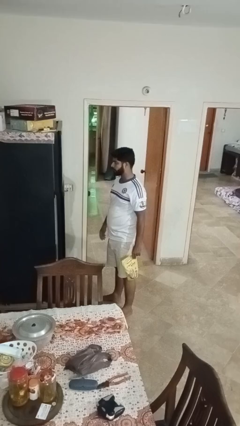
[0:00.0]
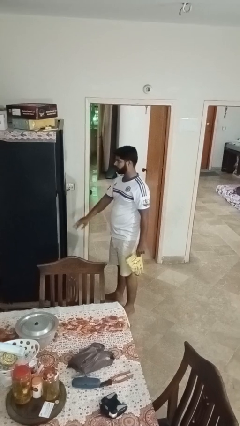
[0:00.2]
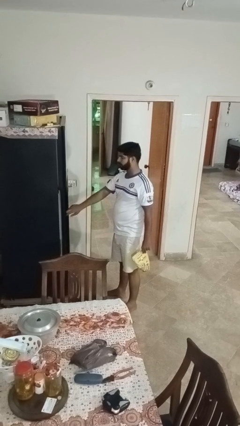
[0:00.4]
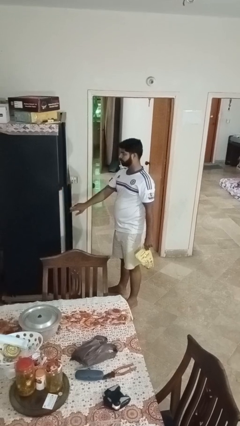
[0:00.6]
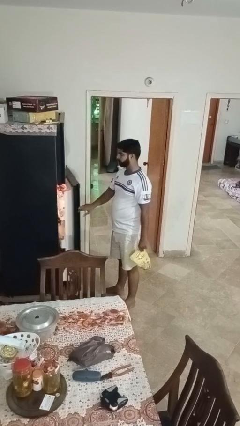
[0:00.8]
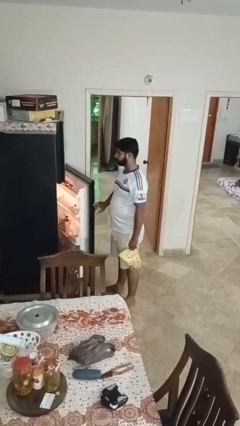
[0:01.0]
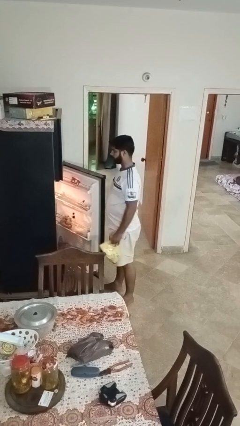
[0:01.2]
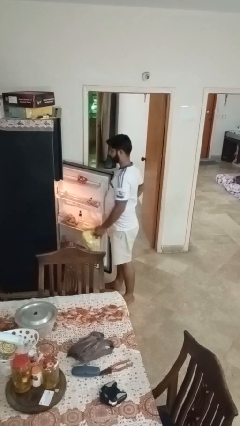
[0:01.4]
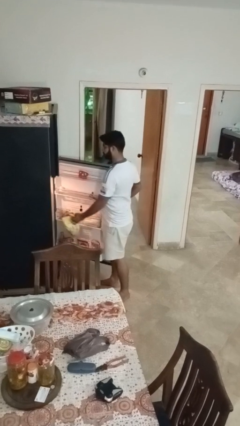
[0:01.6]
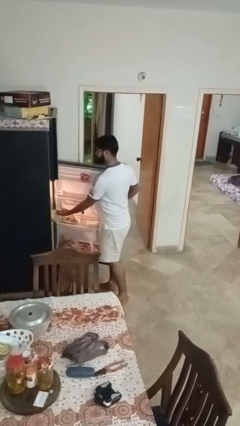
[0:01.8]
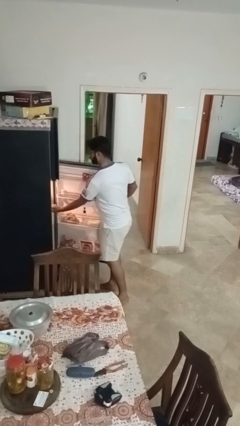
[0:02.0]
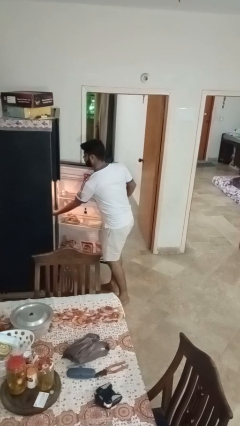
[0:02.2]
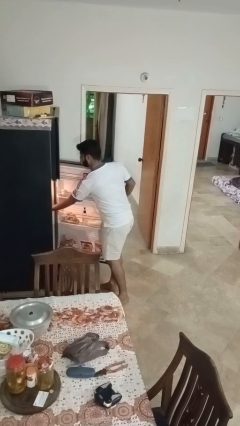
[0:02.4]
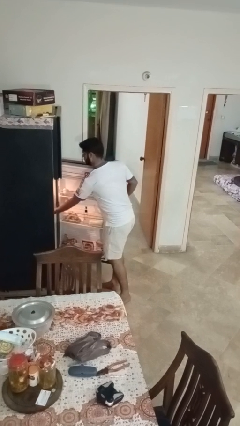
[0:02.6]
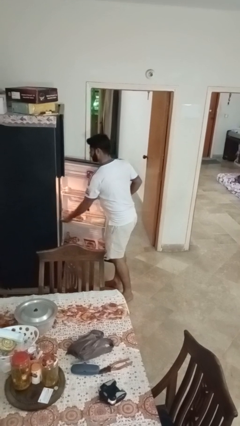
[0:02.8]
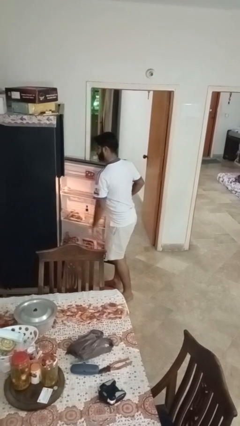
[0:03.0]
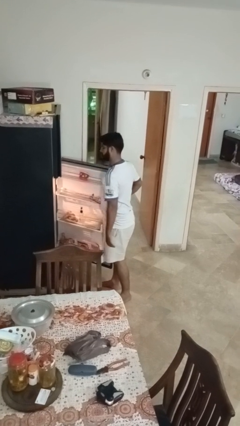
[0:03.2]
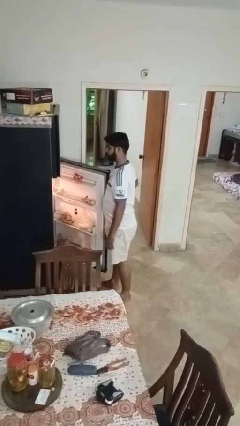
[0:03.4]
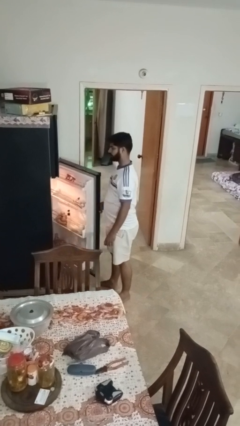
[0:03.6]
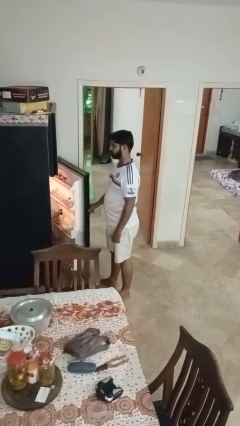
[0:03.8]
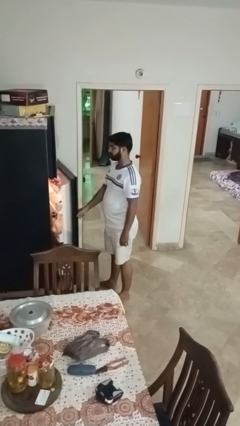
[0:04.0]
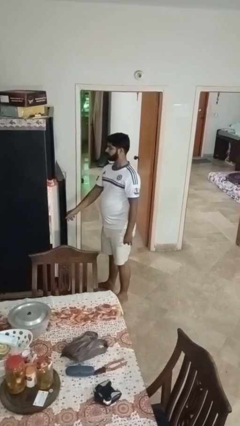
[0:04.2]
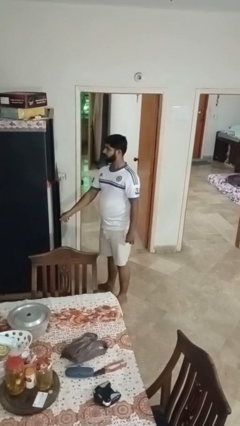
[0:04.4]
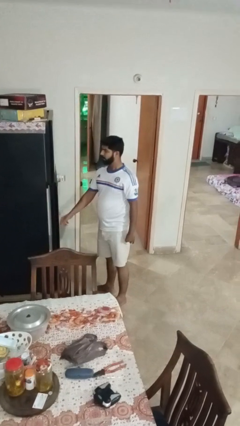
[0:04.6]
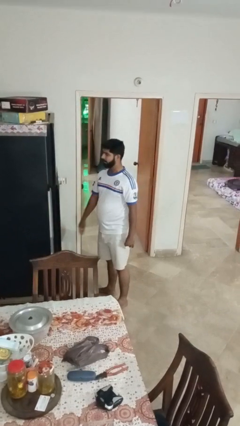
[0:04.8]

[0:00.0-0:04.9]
person puts object into refrigerator

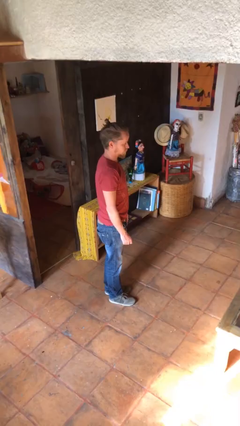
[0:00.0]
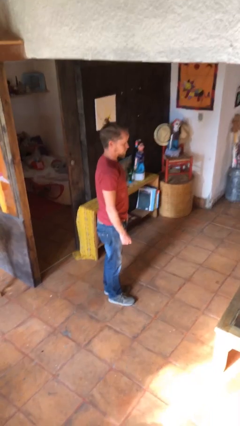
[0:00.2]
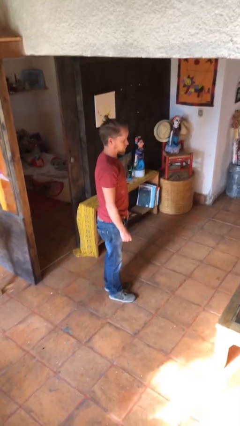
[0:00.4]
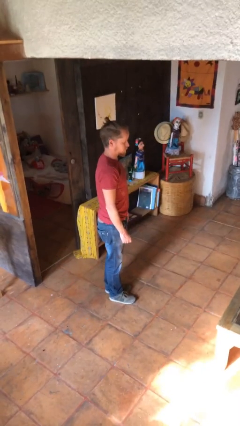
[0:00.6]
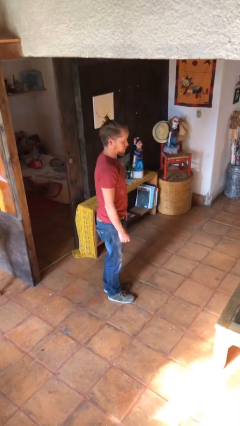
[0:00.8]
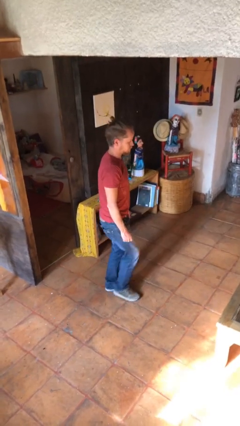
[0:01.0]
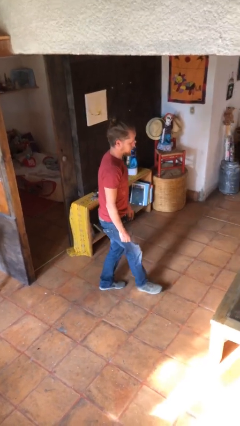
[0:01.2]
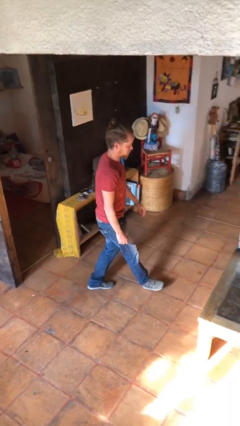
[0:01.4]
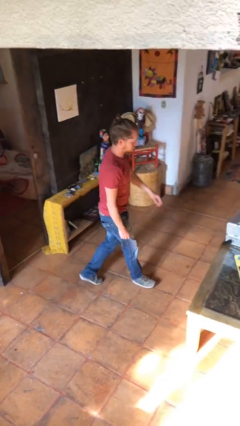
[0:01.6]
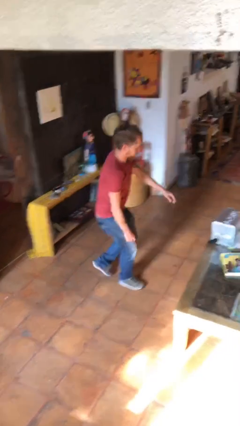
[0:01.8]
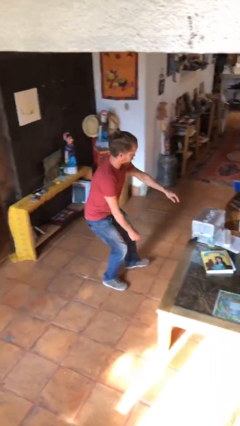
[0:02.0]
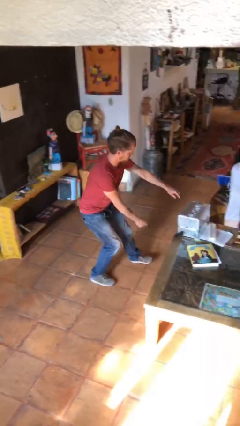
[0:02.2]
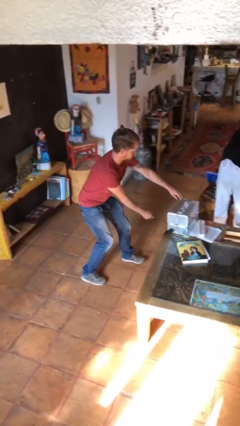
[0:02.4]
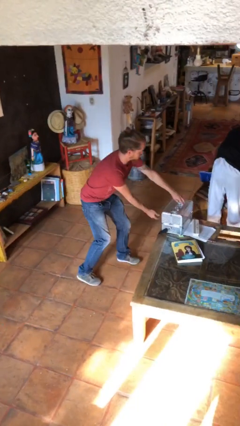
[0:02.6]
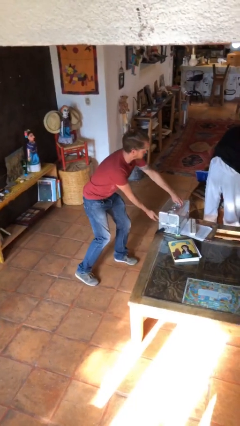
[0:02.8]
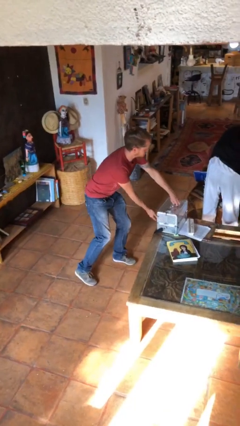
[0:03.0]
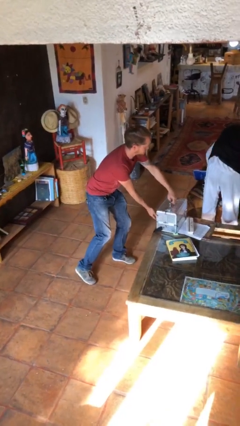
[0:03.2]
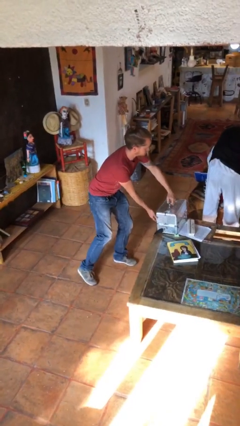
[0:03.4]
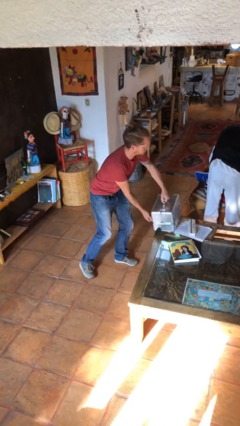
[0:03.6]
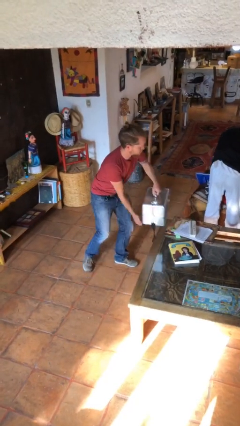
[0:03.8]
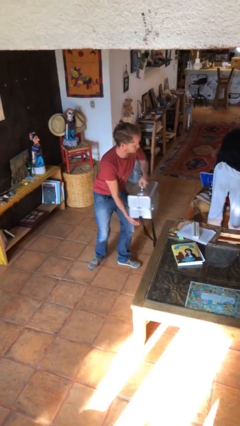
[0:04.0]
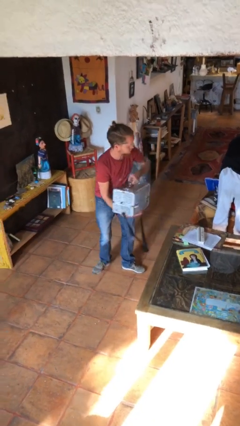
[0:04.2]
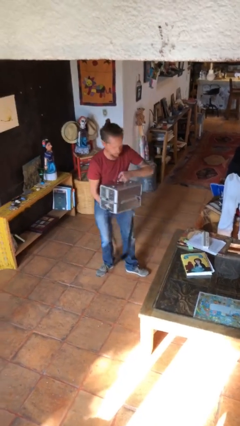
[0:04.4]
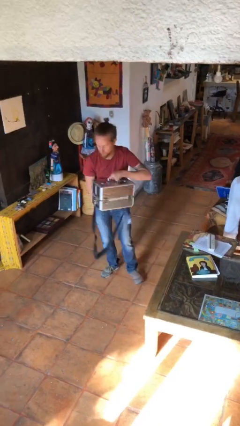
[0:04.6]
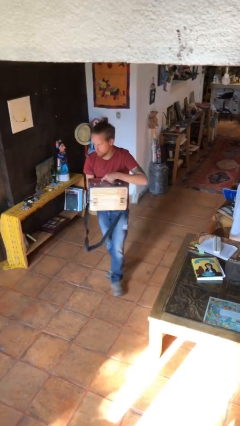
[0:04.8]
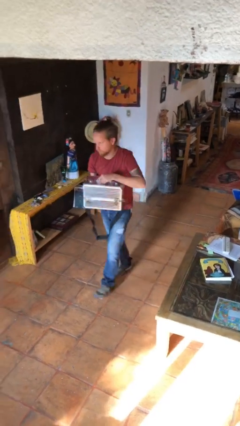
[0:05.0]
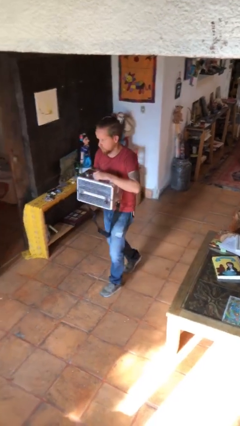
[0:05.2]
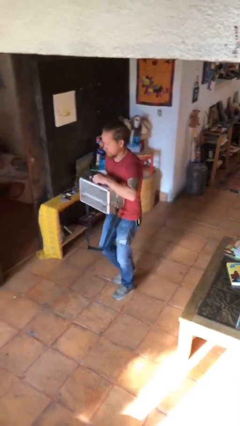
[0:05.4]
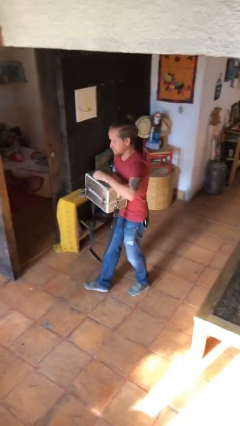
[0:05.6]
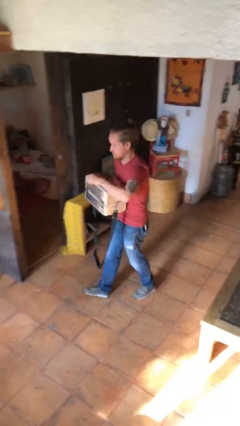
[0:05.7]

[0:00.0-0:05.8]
person steals object from person

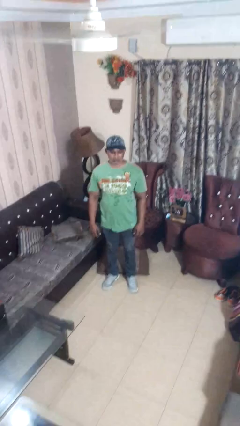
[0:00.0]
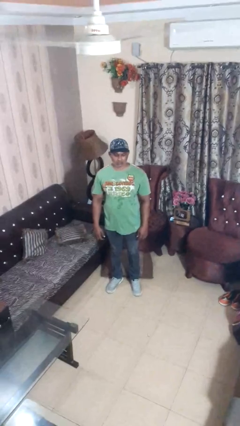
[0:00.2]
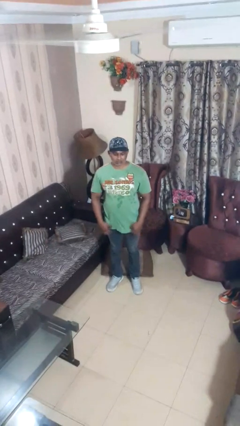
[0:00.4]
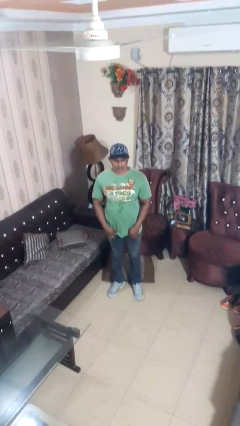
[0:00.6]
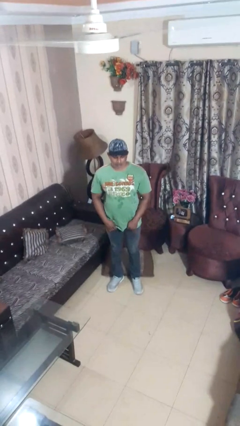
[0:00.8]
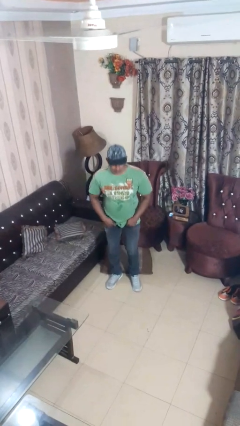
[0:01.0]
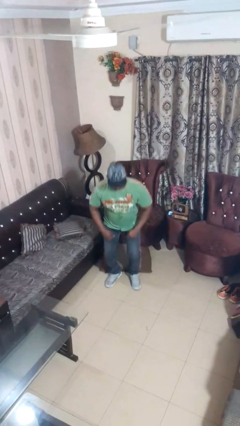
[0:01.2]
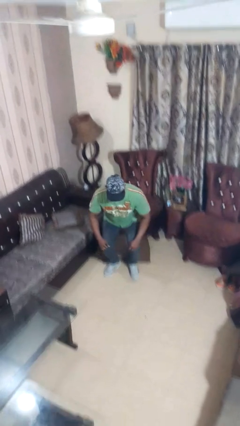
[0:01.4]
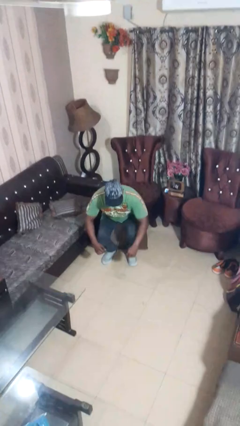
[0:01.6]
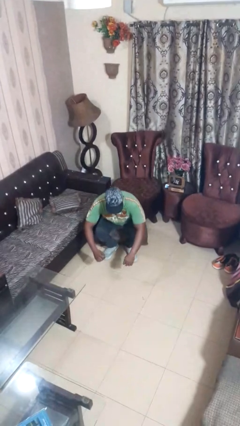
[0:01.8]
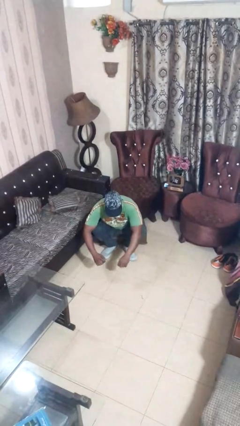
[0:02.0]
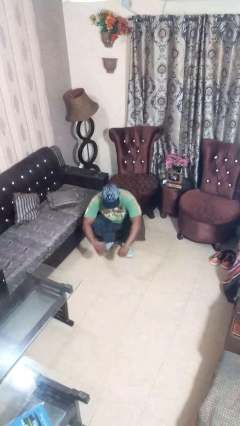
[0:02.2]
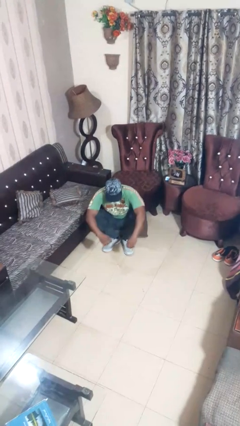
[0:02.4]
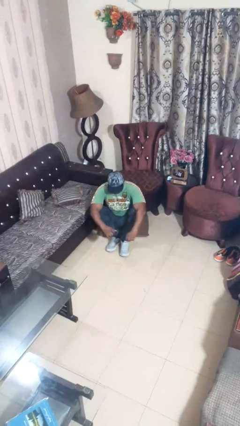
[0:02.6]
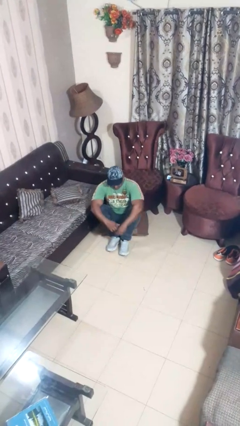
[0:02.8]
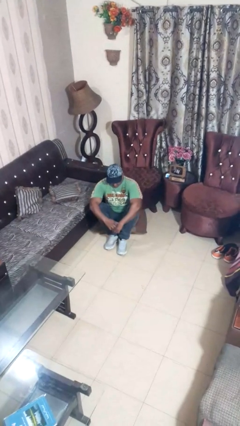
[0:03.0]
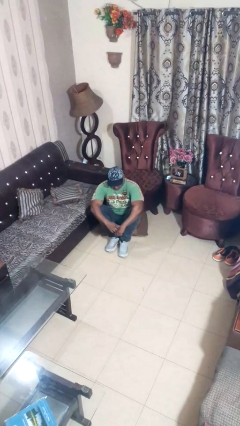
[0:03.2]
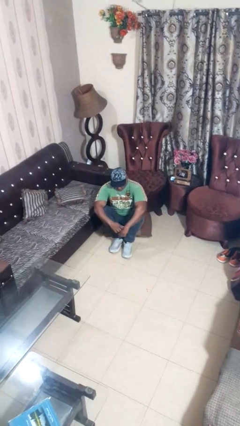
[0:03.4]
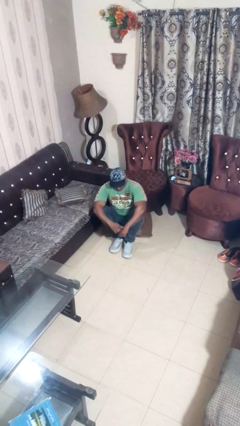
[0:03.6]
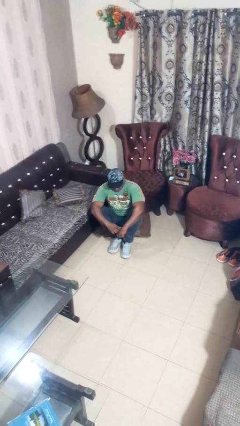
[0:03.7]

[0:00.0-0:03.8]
person sits crisscross

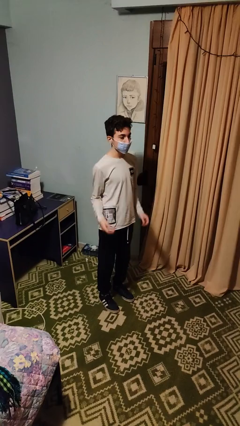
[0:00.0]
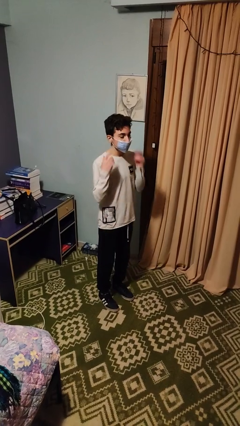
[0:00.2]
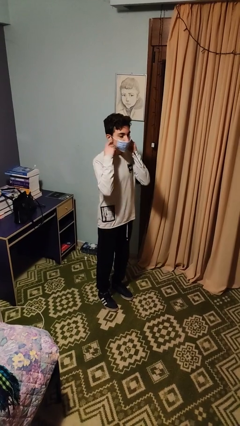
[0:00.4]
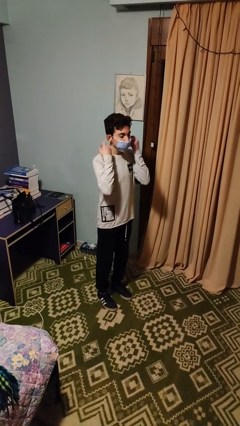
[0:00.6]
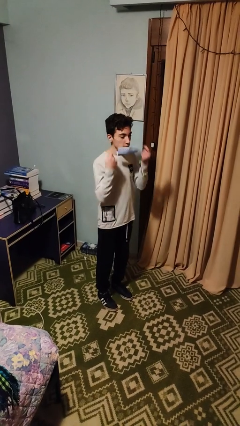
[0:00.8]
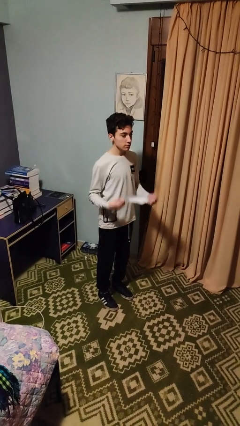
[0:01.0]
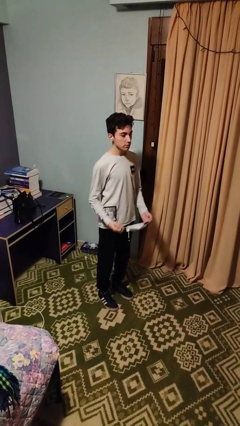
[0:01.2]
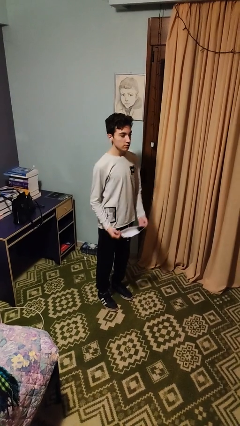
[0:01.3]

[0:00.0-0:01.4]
person takes off facemask

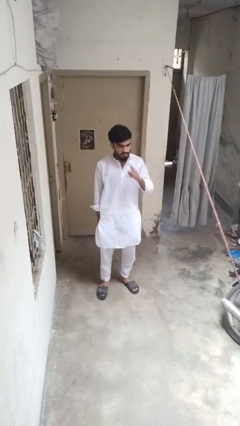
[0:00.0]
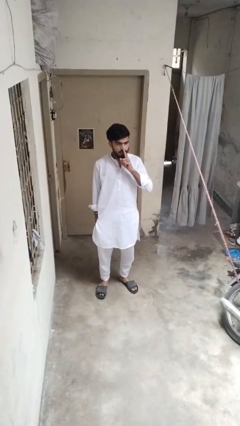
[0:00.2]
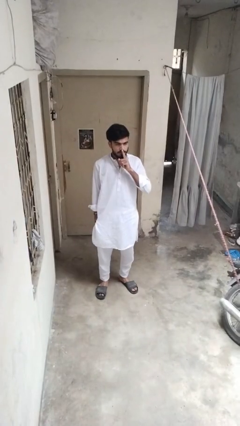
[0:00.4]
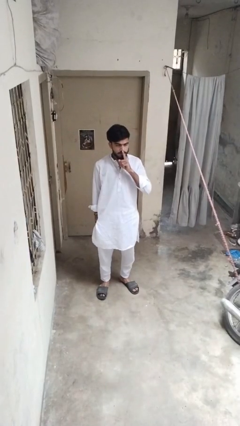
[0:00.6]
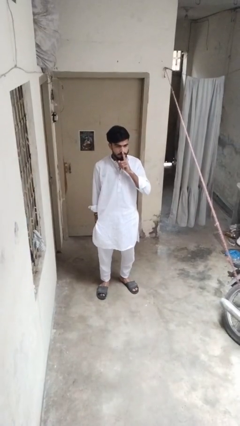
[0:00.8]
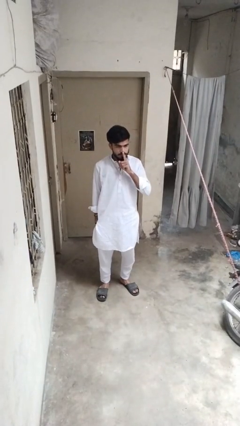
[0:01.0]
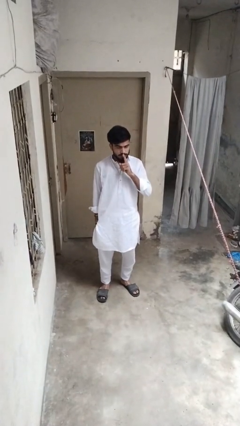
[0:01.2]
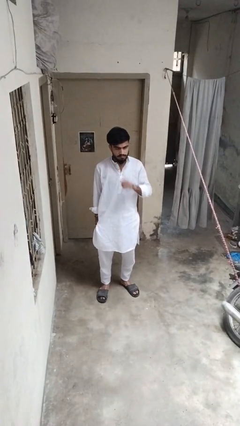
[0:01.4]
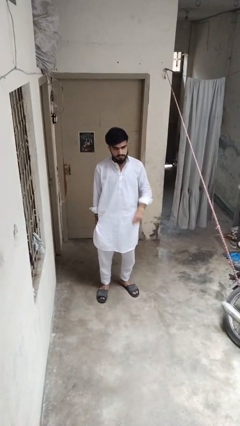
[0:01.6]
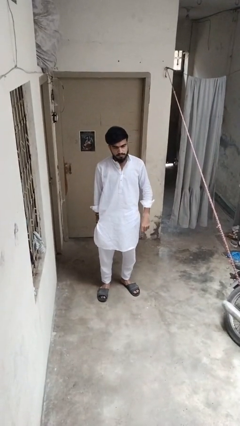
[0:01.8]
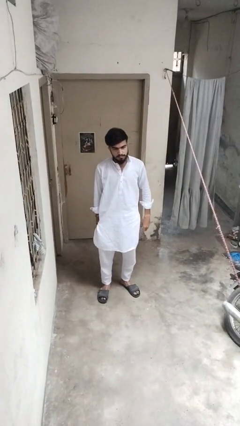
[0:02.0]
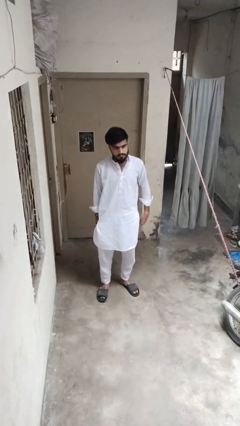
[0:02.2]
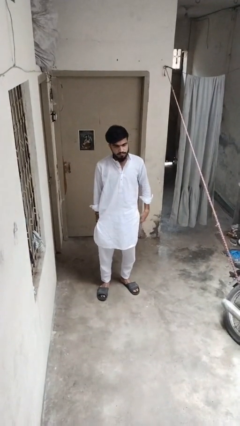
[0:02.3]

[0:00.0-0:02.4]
person gestures be quiet
